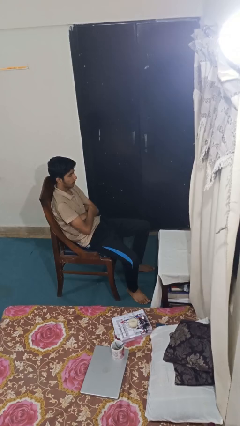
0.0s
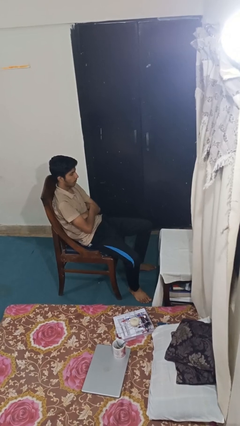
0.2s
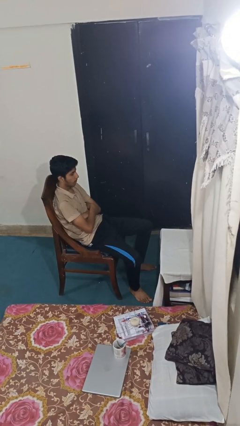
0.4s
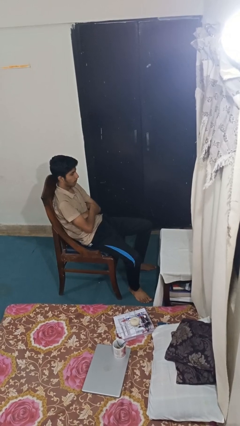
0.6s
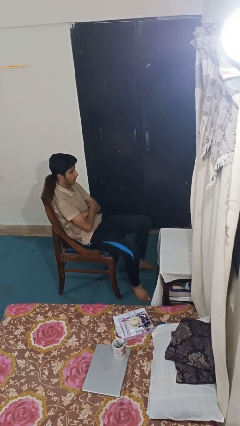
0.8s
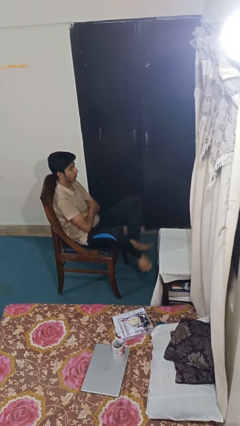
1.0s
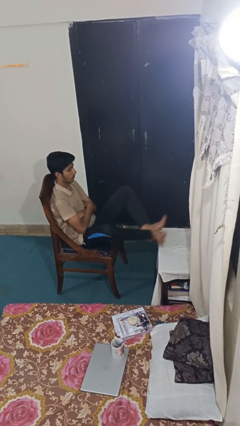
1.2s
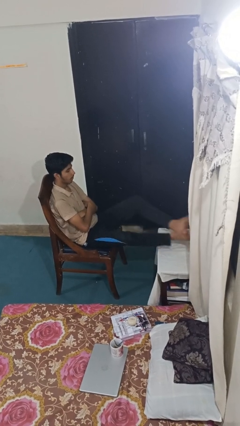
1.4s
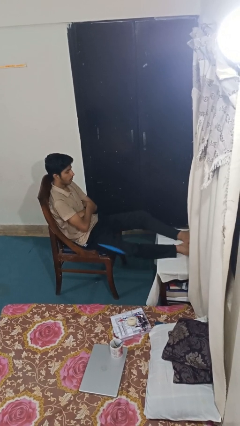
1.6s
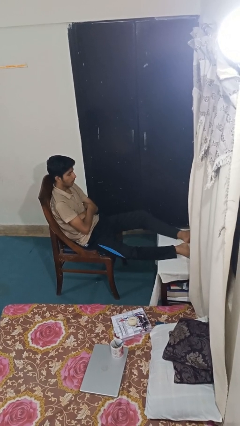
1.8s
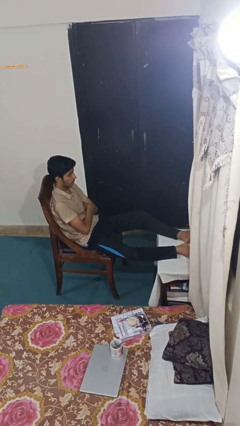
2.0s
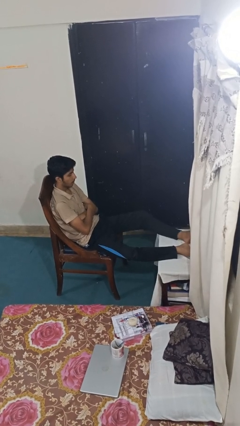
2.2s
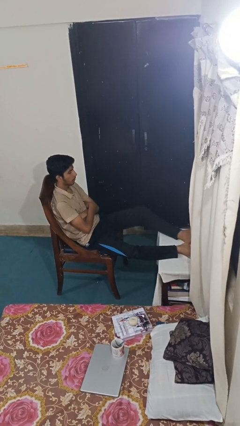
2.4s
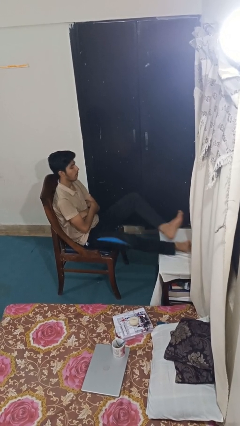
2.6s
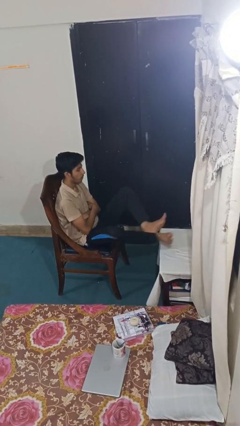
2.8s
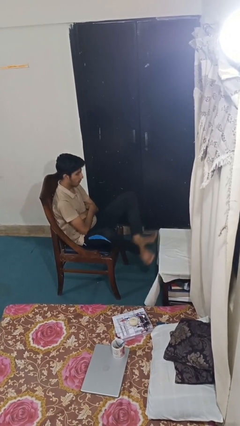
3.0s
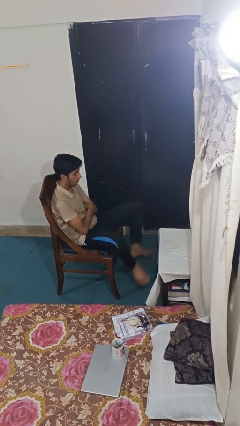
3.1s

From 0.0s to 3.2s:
person puts feet up

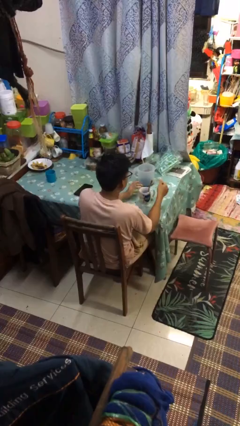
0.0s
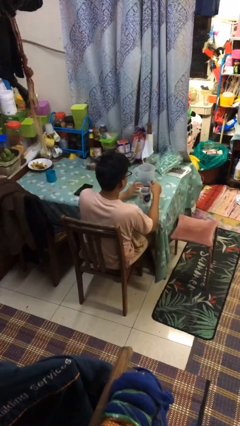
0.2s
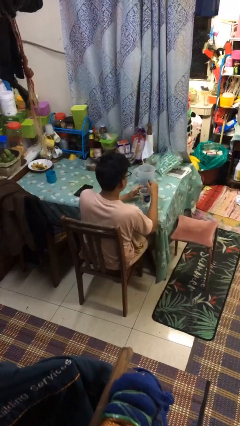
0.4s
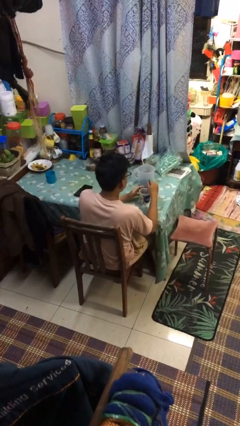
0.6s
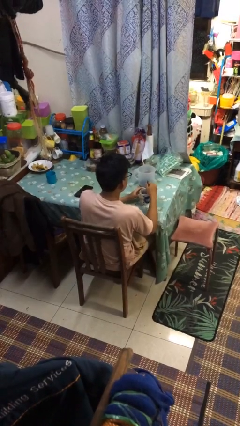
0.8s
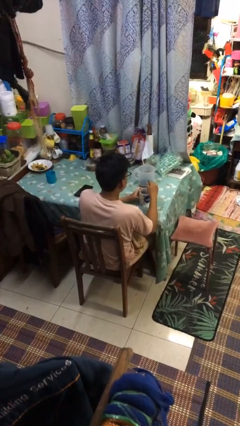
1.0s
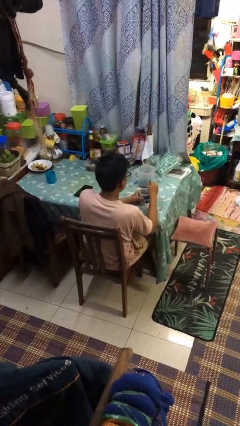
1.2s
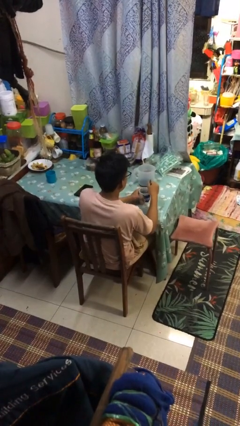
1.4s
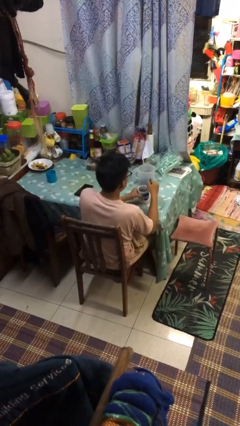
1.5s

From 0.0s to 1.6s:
person stirs mug

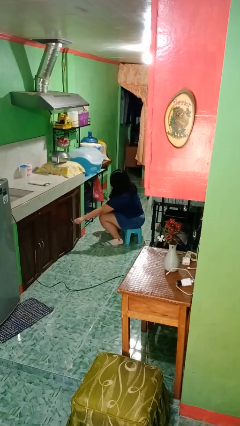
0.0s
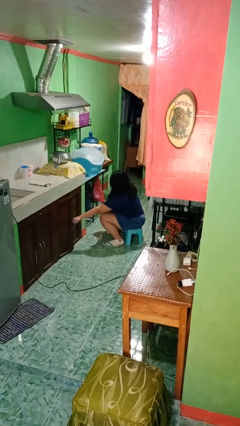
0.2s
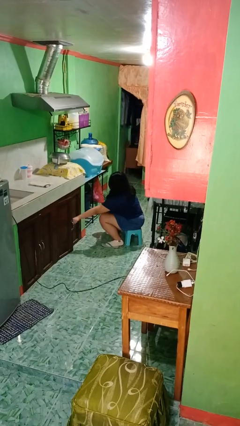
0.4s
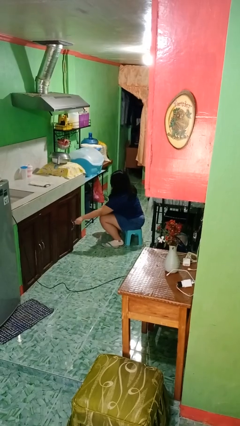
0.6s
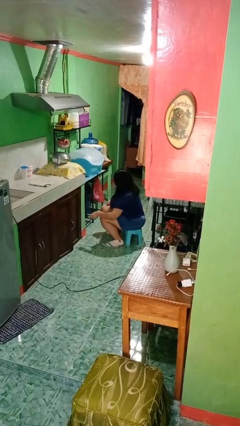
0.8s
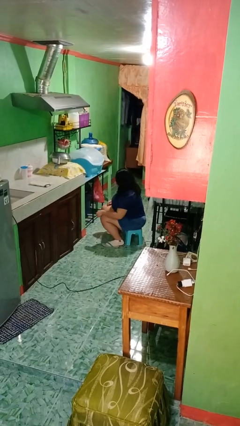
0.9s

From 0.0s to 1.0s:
person closes cabinet

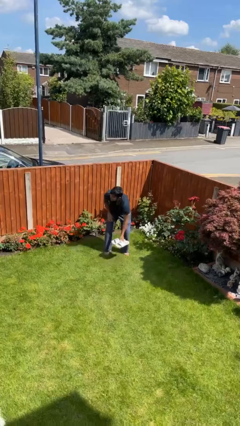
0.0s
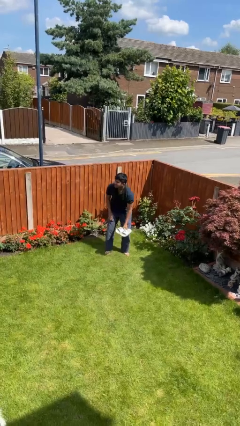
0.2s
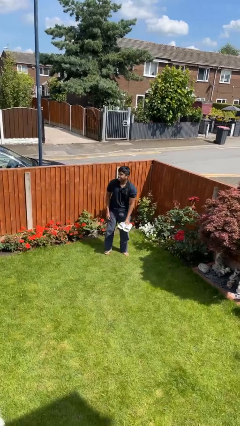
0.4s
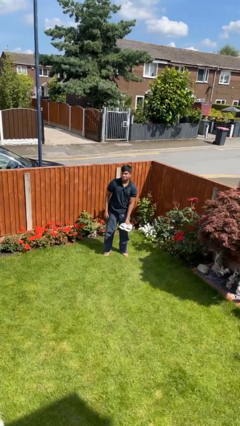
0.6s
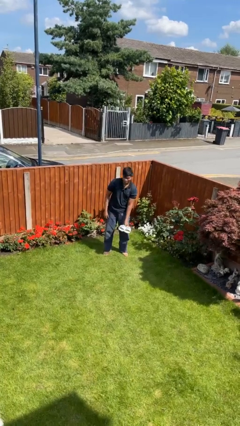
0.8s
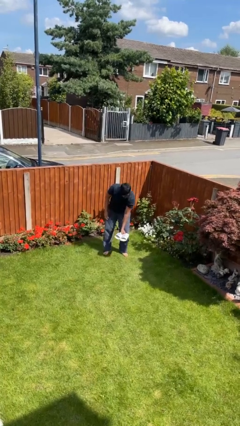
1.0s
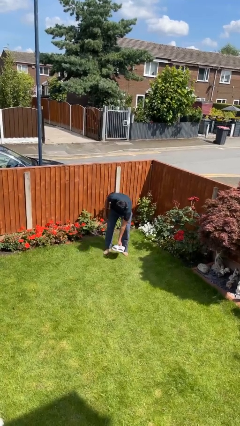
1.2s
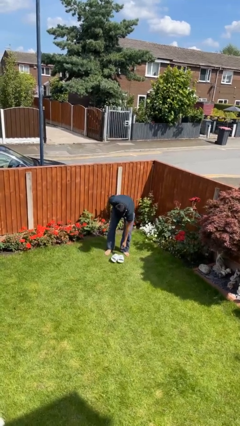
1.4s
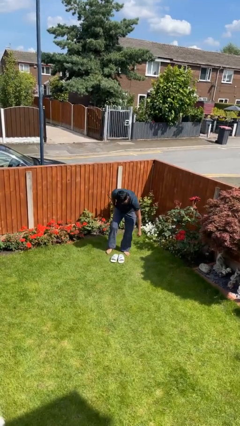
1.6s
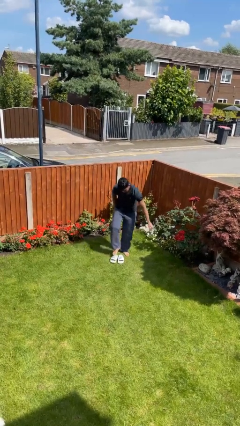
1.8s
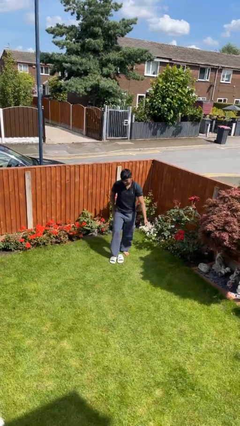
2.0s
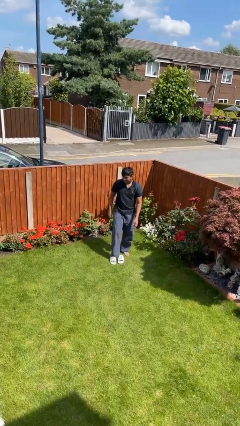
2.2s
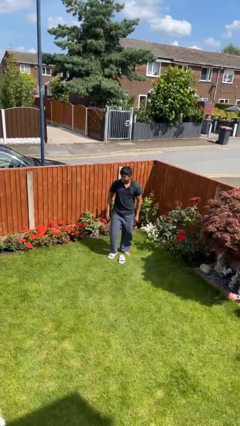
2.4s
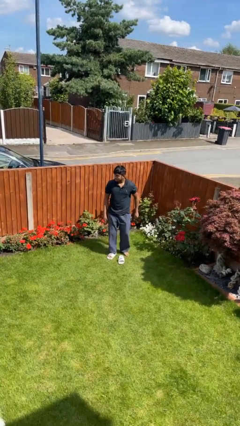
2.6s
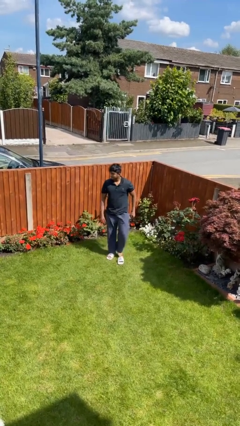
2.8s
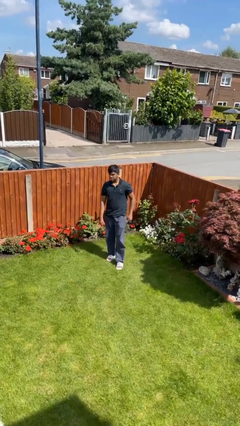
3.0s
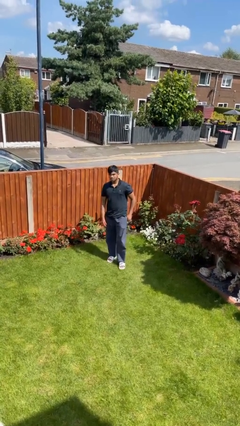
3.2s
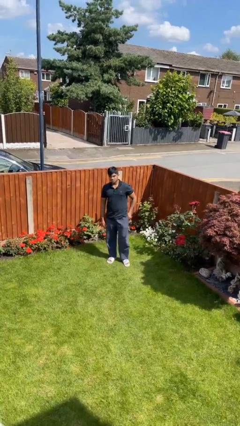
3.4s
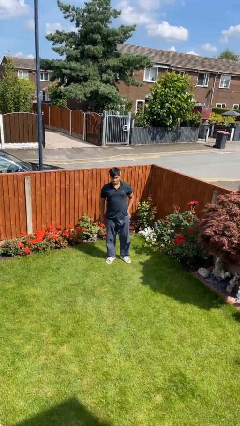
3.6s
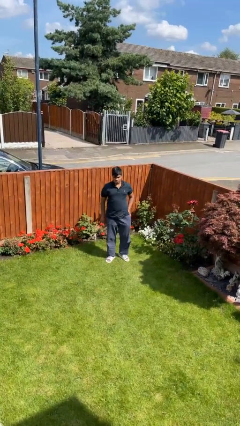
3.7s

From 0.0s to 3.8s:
person puts on shoes

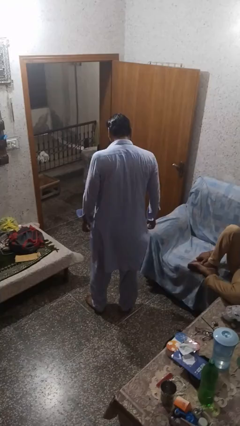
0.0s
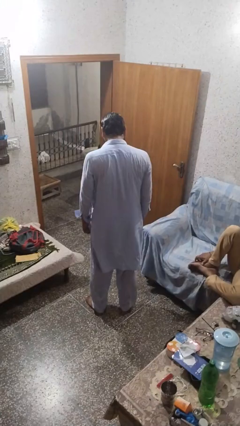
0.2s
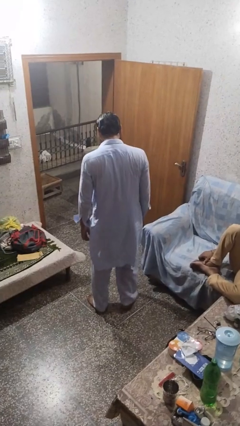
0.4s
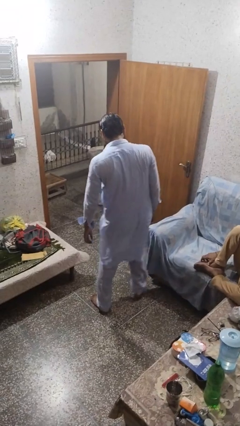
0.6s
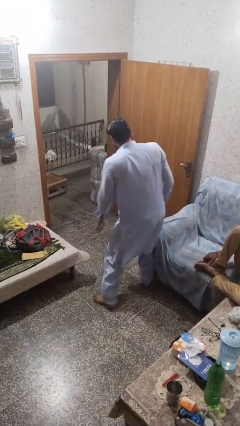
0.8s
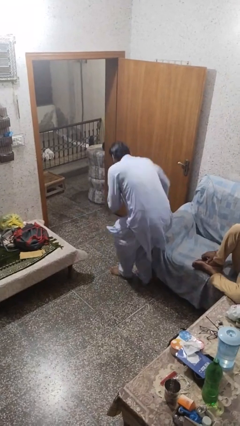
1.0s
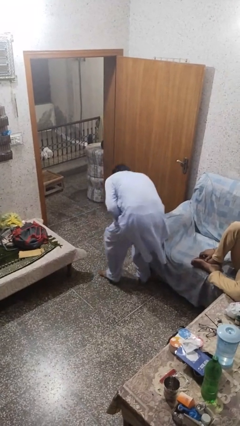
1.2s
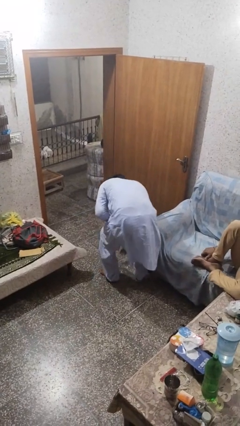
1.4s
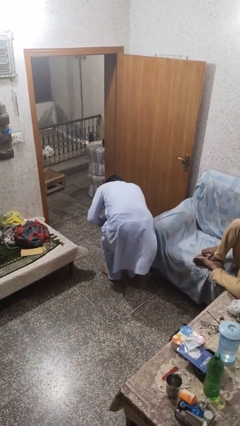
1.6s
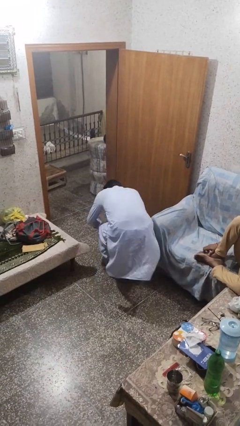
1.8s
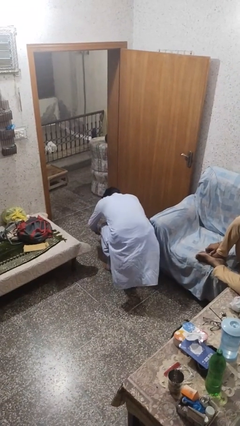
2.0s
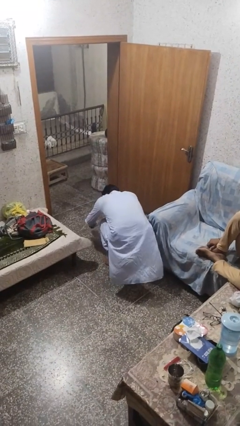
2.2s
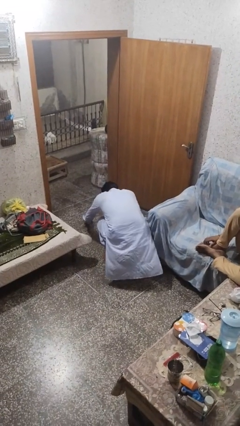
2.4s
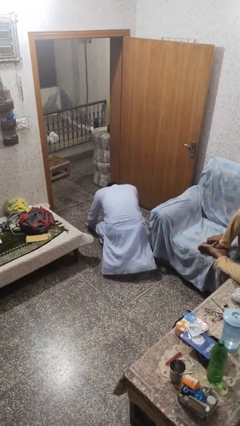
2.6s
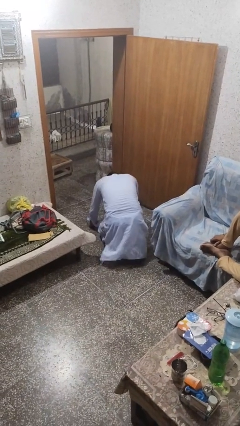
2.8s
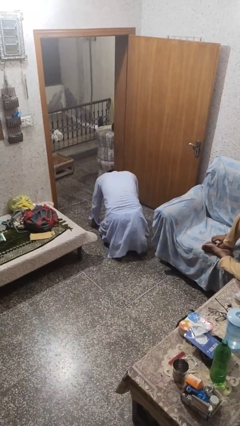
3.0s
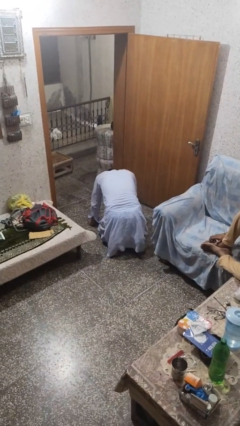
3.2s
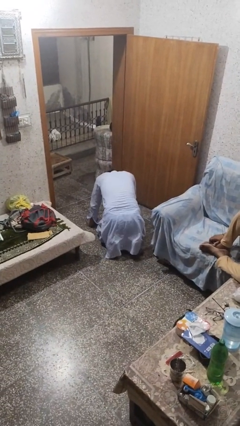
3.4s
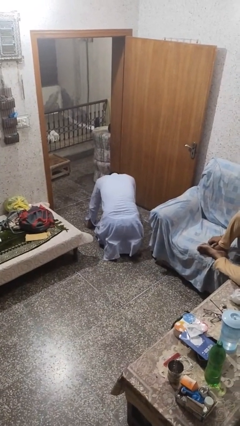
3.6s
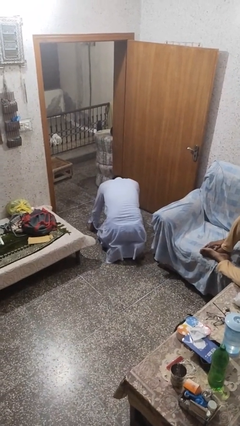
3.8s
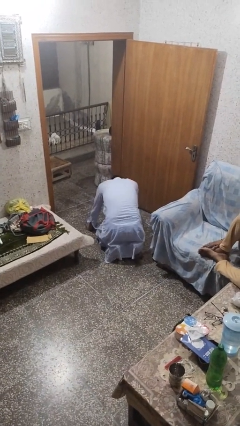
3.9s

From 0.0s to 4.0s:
person trips on object on floor

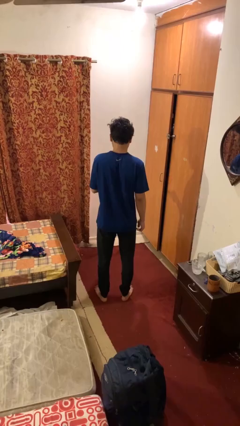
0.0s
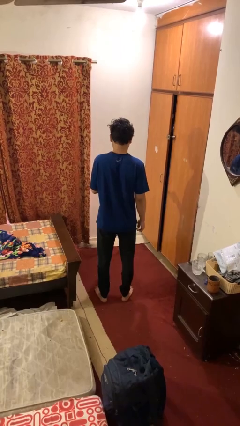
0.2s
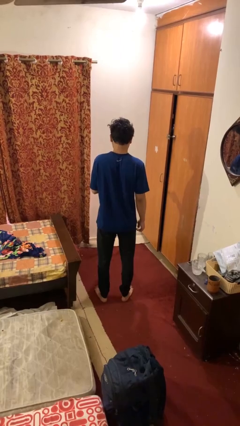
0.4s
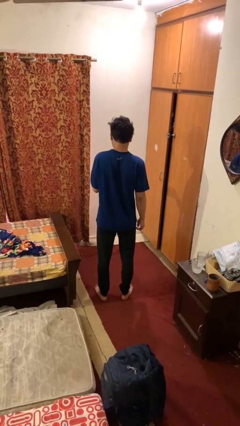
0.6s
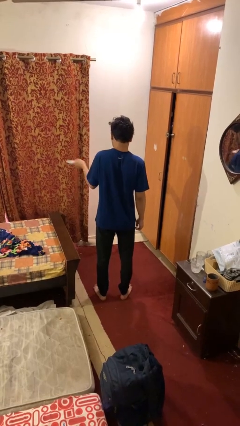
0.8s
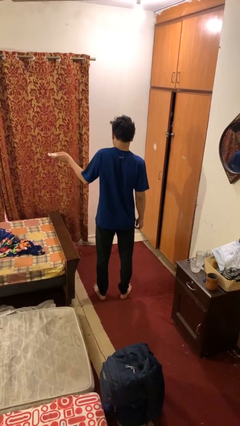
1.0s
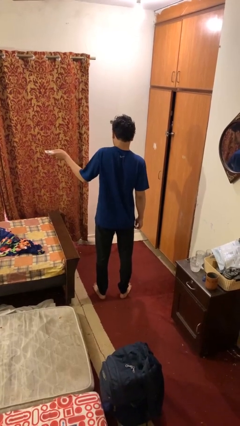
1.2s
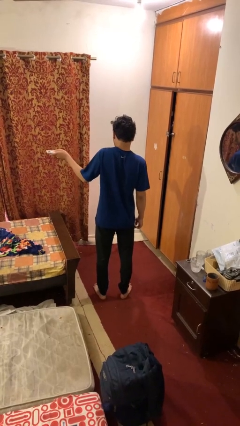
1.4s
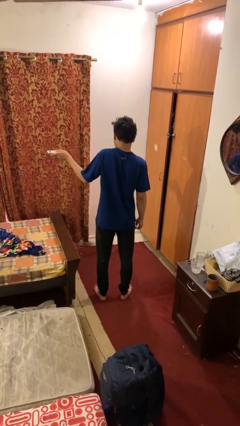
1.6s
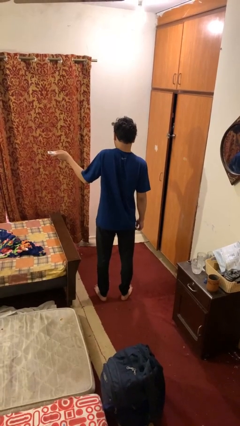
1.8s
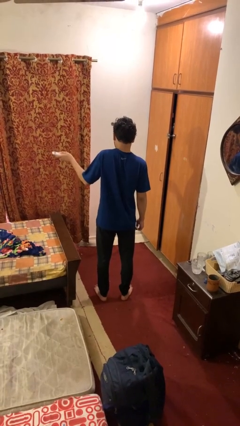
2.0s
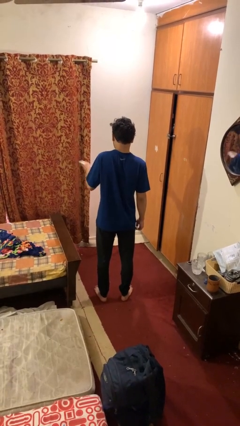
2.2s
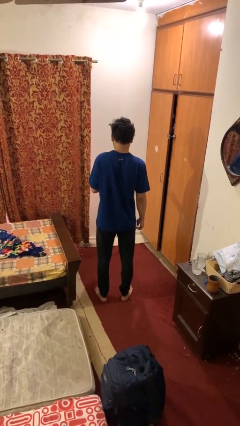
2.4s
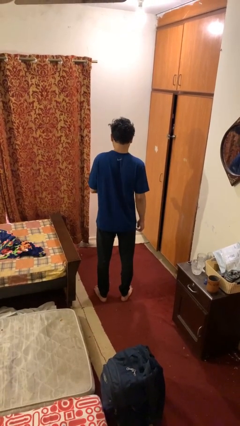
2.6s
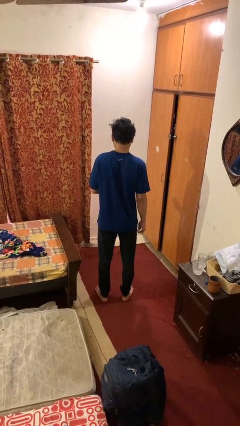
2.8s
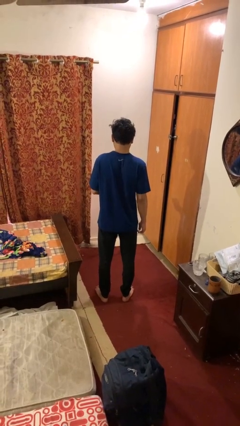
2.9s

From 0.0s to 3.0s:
person uses television remote

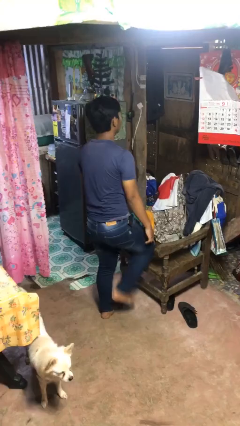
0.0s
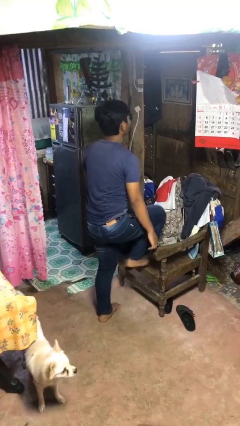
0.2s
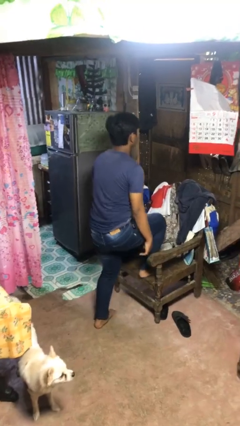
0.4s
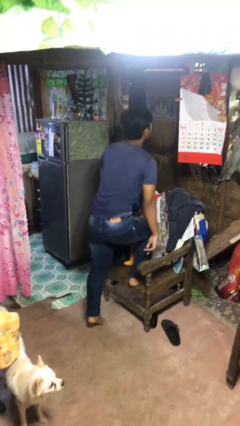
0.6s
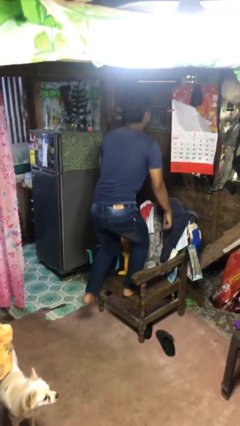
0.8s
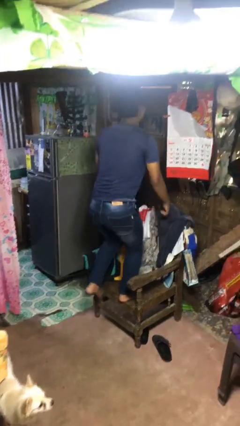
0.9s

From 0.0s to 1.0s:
person climbs on chair
